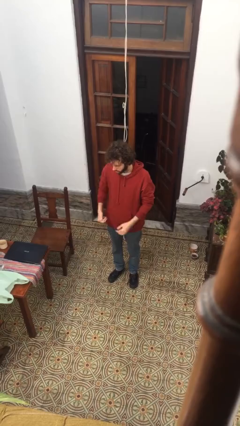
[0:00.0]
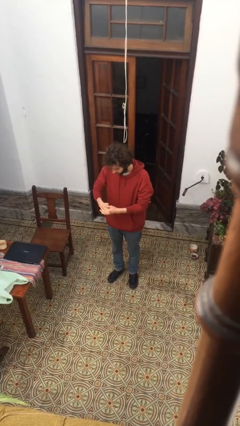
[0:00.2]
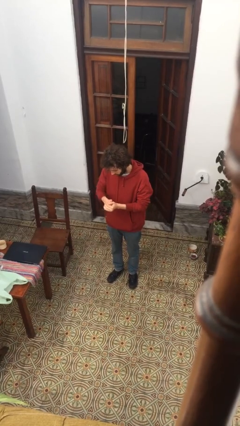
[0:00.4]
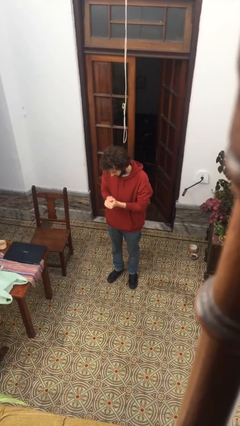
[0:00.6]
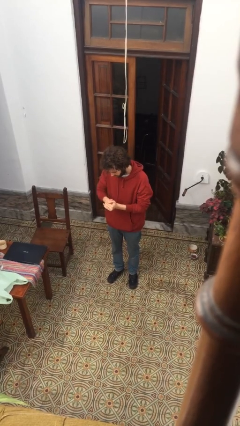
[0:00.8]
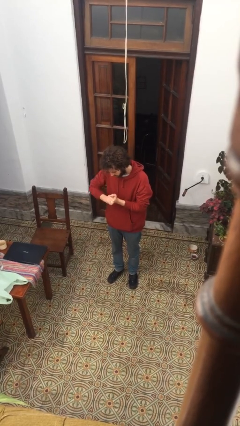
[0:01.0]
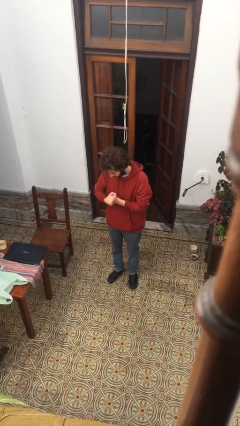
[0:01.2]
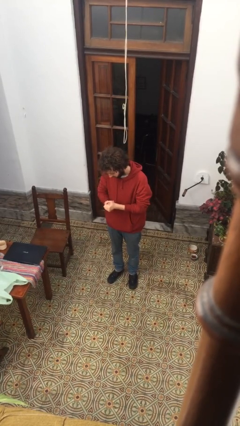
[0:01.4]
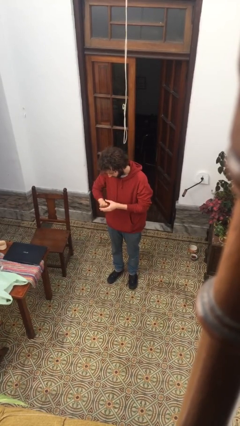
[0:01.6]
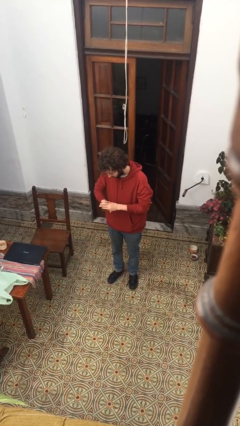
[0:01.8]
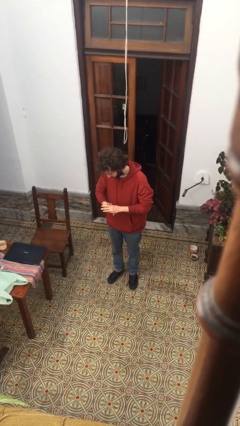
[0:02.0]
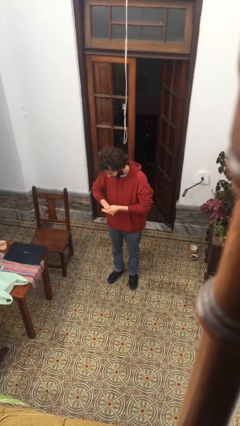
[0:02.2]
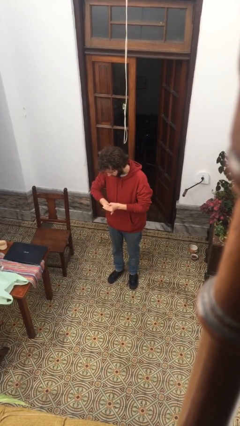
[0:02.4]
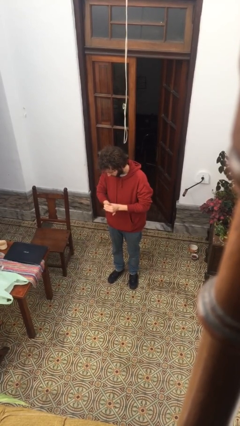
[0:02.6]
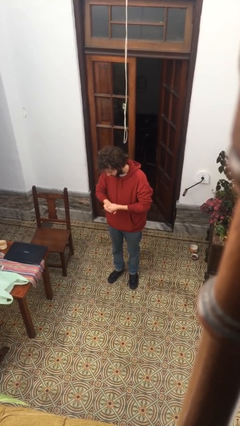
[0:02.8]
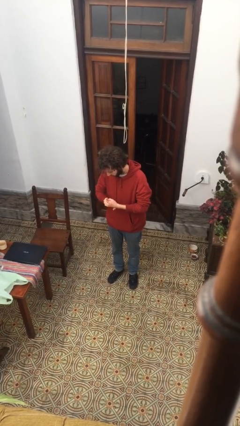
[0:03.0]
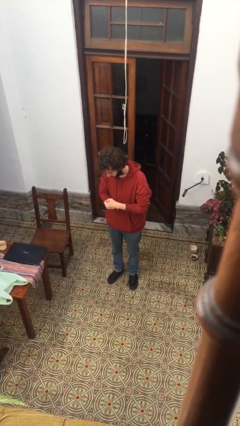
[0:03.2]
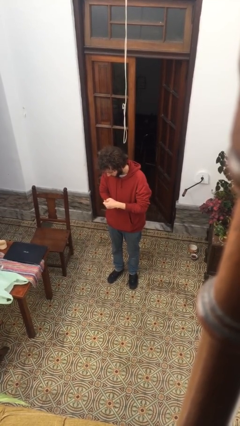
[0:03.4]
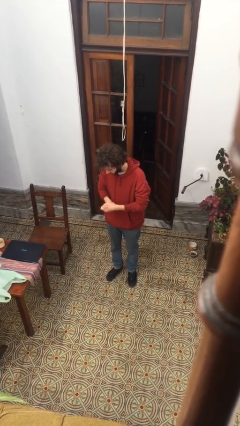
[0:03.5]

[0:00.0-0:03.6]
person cracks knuckles

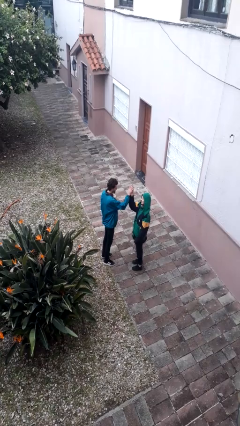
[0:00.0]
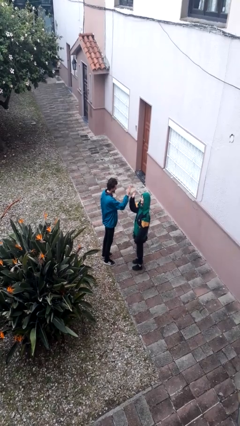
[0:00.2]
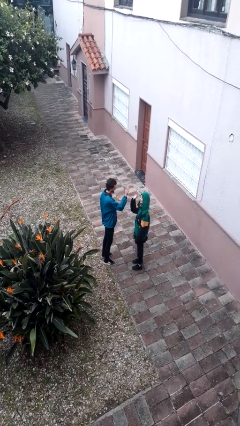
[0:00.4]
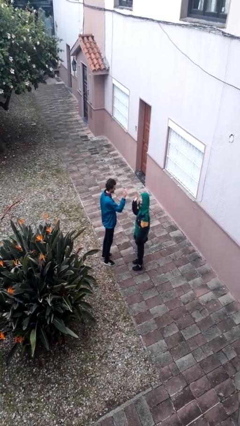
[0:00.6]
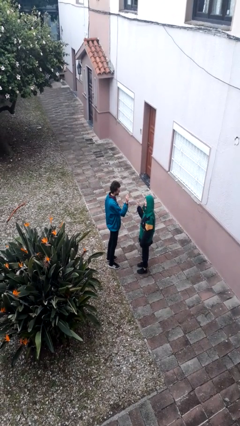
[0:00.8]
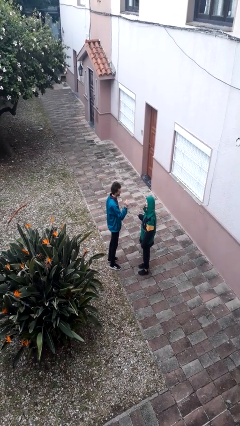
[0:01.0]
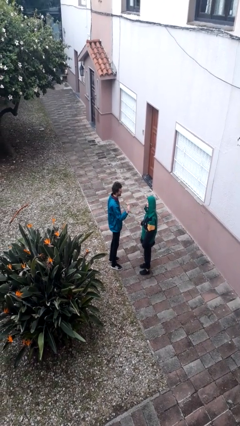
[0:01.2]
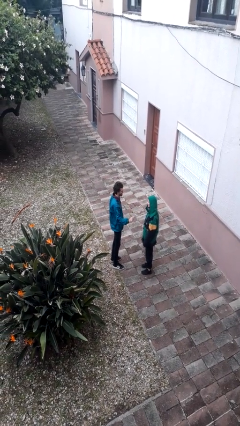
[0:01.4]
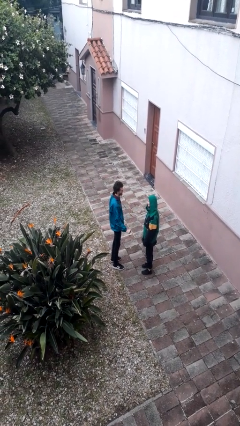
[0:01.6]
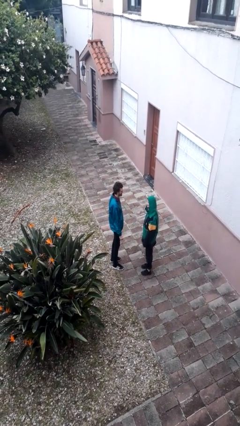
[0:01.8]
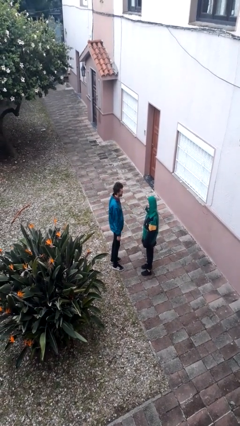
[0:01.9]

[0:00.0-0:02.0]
person highfives hand

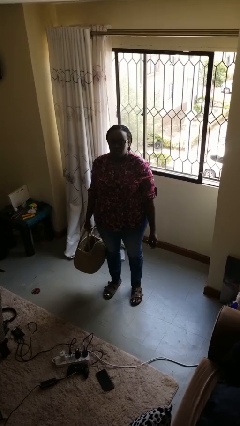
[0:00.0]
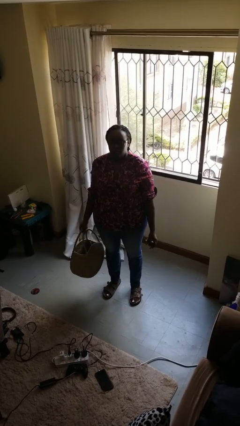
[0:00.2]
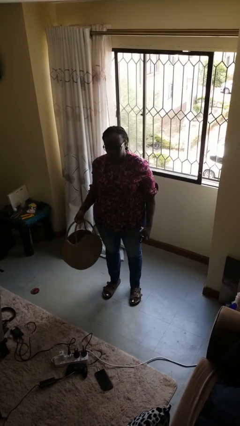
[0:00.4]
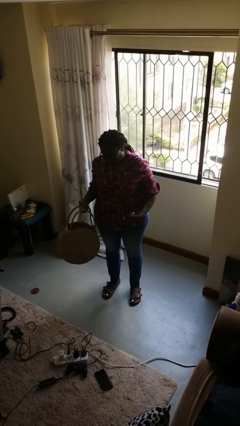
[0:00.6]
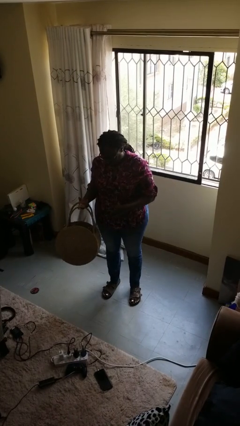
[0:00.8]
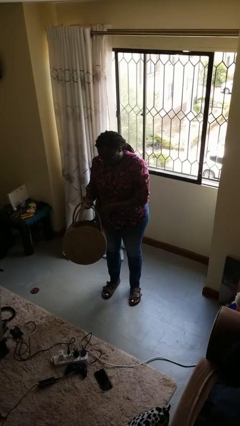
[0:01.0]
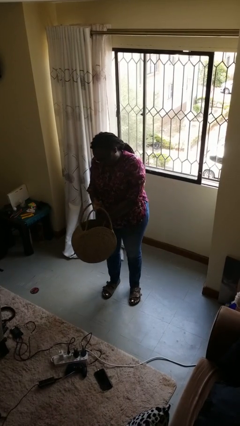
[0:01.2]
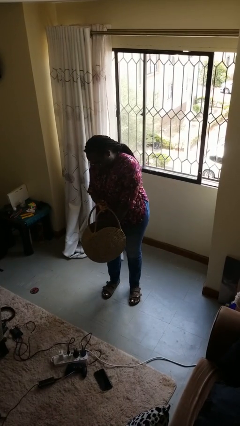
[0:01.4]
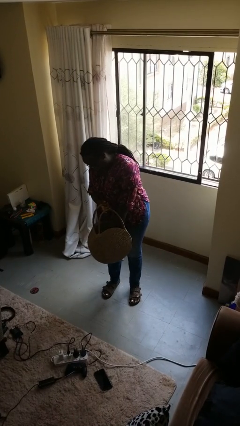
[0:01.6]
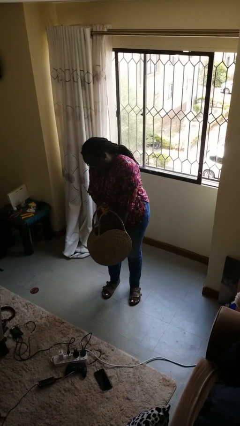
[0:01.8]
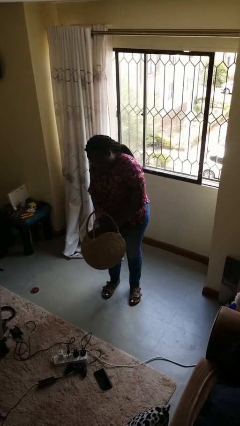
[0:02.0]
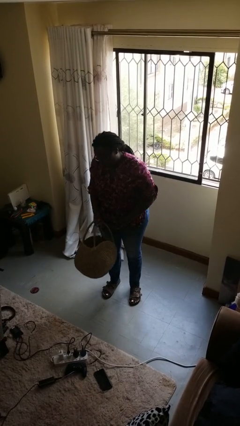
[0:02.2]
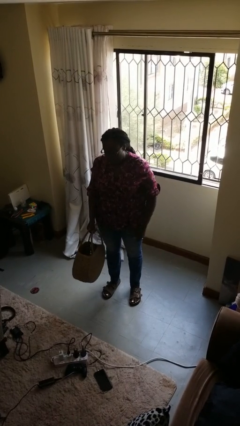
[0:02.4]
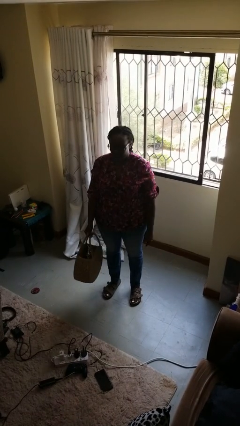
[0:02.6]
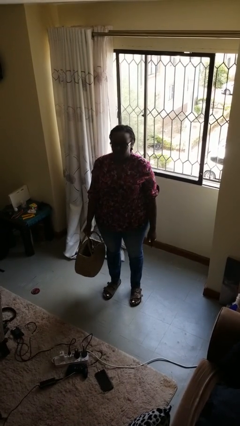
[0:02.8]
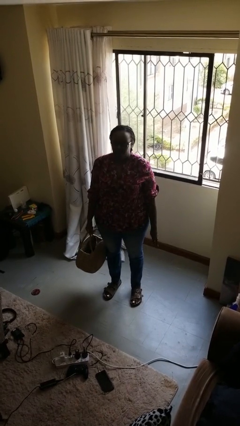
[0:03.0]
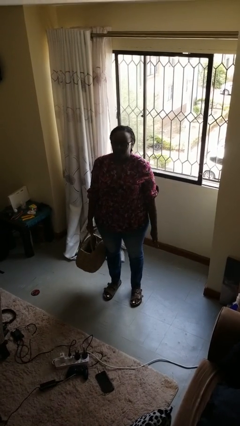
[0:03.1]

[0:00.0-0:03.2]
person puts object into basket

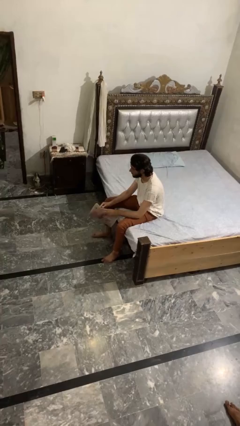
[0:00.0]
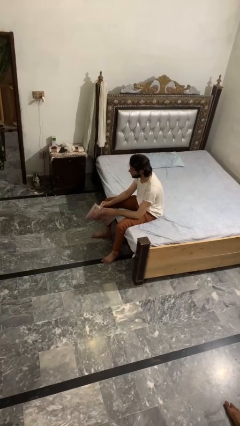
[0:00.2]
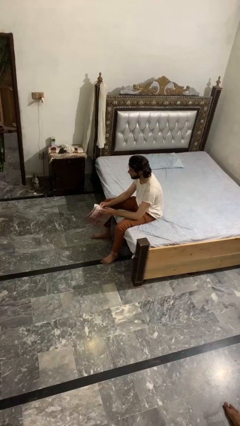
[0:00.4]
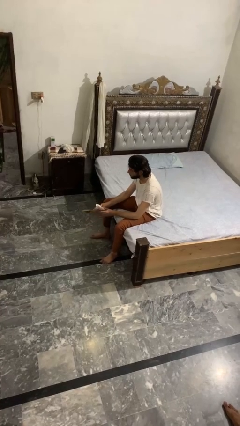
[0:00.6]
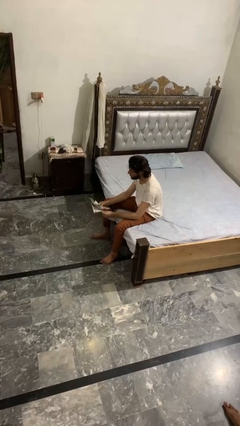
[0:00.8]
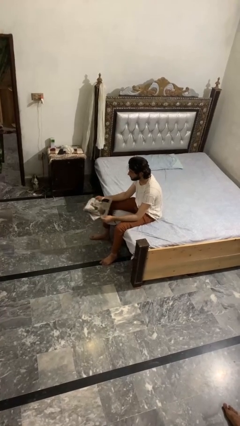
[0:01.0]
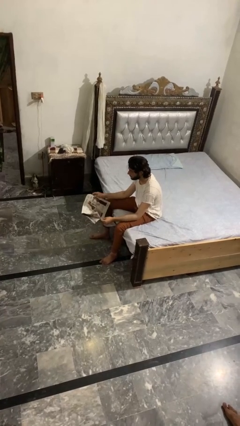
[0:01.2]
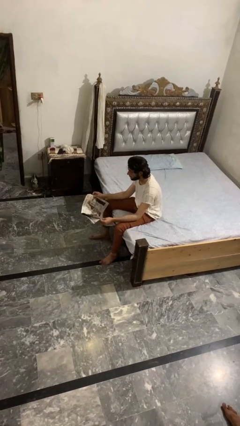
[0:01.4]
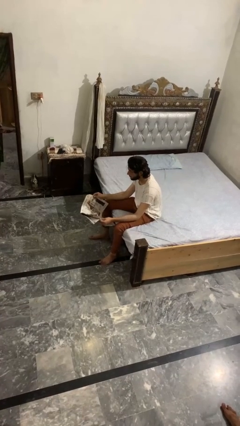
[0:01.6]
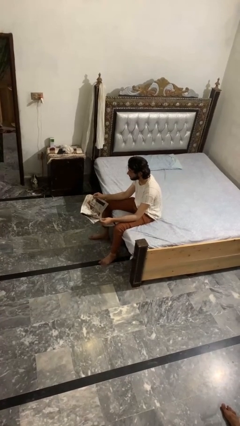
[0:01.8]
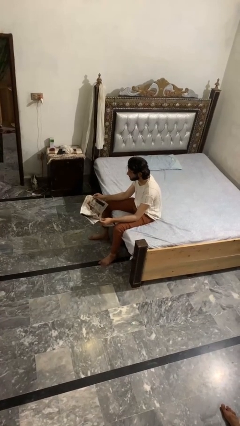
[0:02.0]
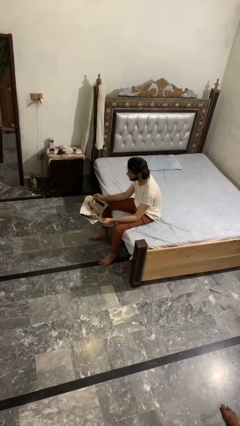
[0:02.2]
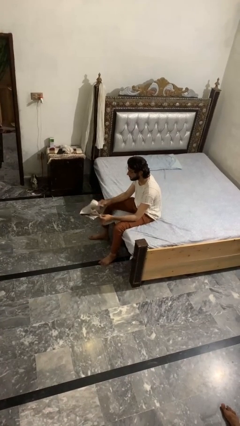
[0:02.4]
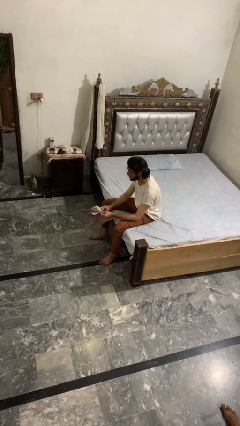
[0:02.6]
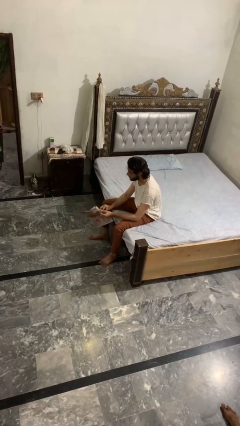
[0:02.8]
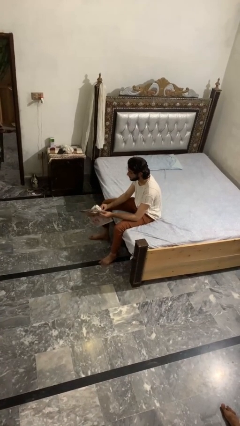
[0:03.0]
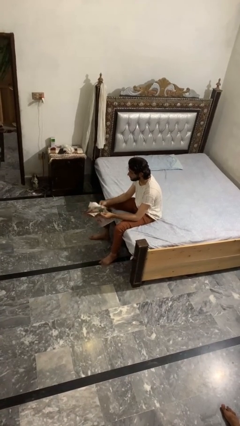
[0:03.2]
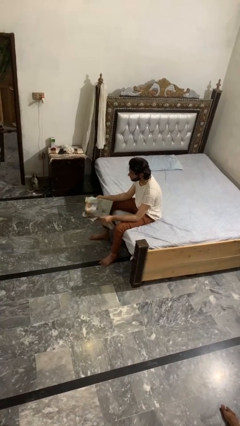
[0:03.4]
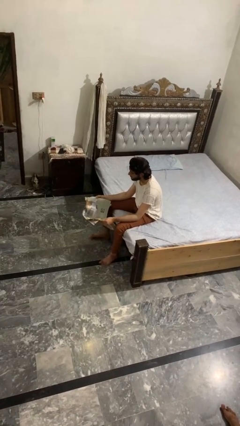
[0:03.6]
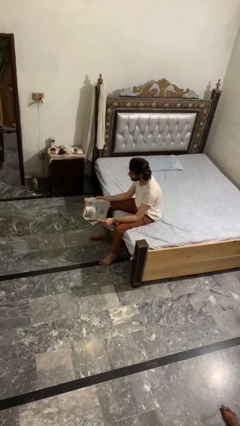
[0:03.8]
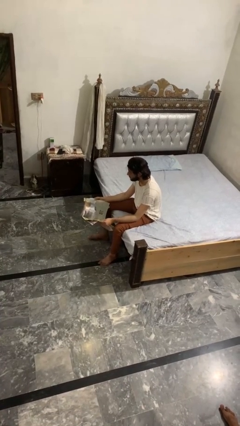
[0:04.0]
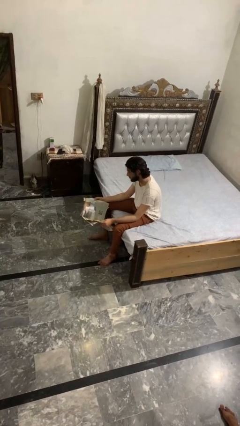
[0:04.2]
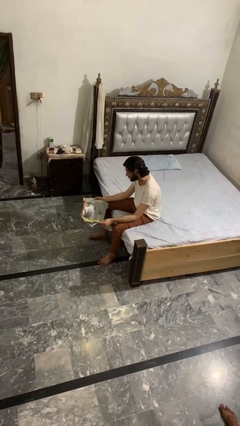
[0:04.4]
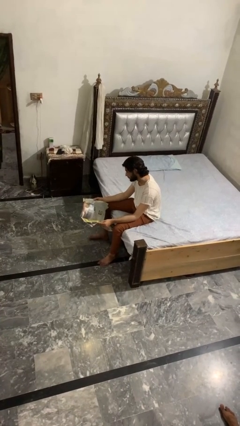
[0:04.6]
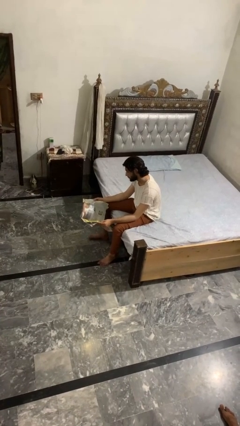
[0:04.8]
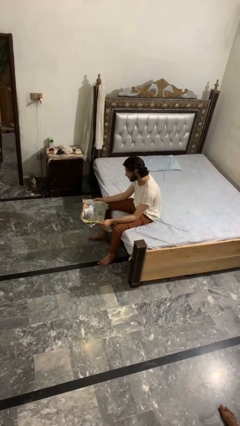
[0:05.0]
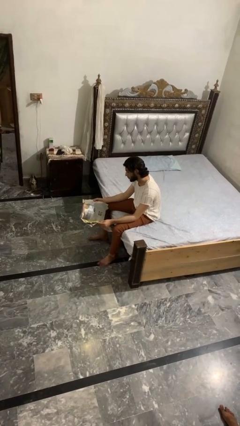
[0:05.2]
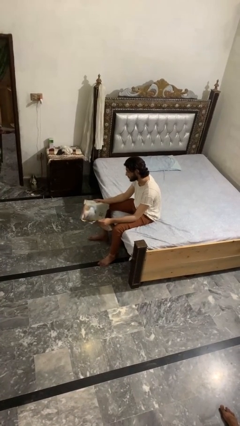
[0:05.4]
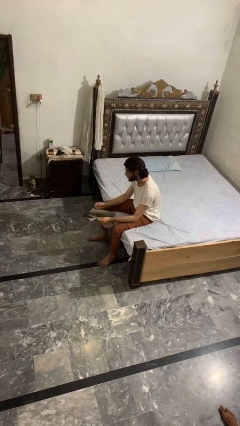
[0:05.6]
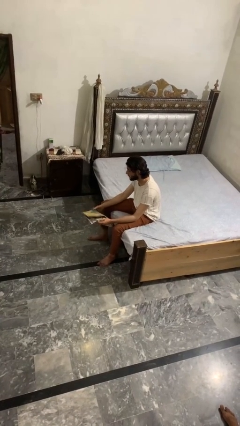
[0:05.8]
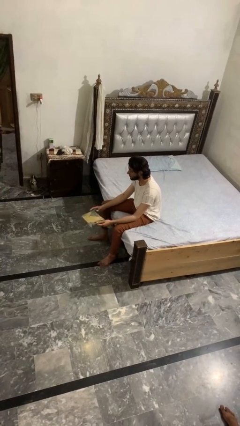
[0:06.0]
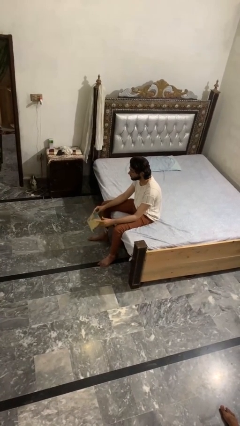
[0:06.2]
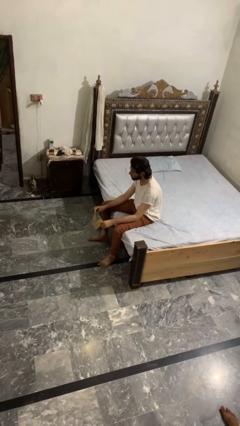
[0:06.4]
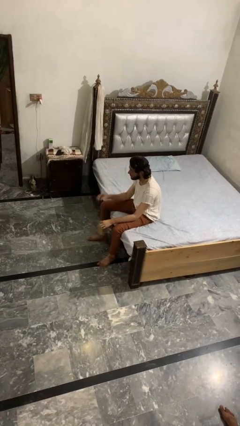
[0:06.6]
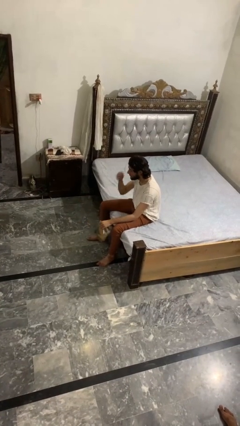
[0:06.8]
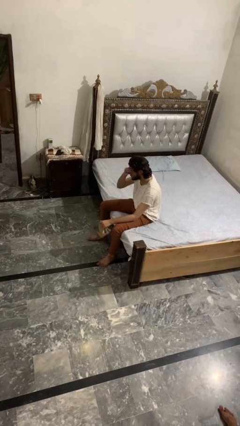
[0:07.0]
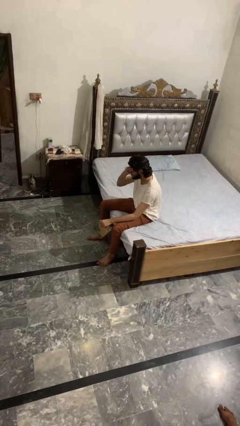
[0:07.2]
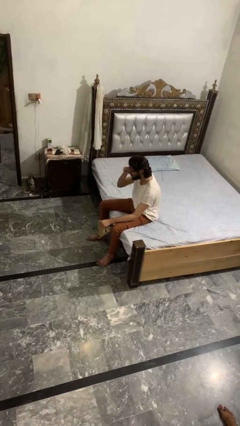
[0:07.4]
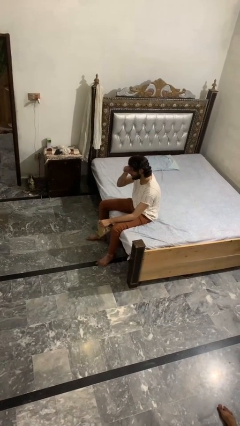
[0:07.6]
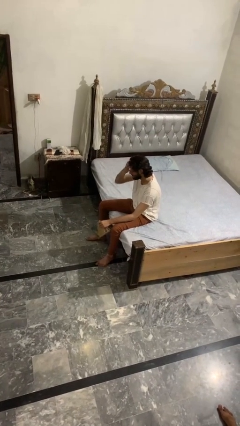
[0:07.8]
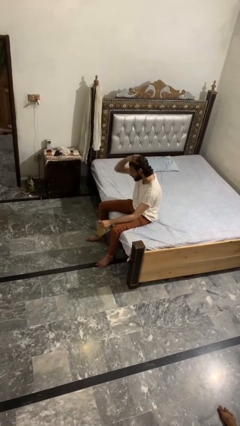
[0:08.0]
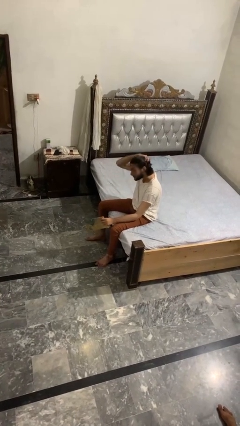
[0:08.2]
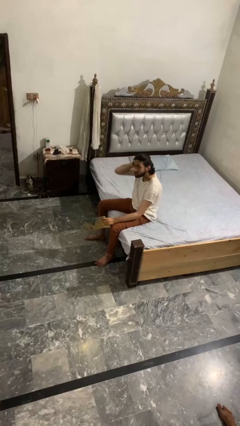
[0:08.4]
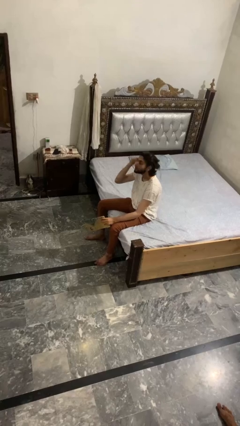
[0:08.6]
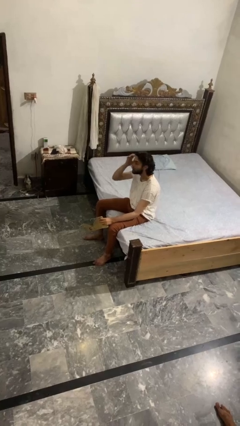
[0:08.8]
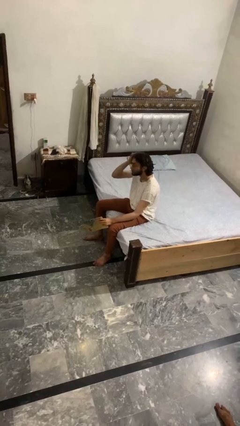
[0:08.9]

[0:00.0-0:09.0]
person reads magazine

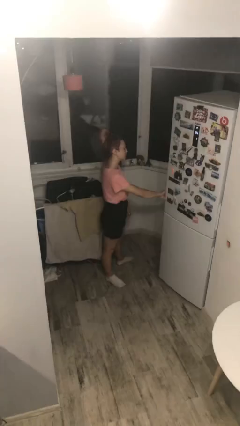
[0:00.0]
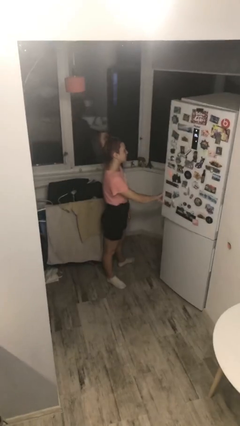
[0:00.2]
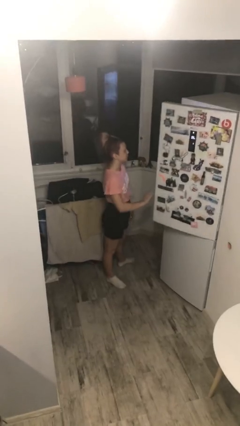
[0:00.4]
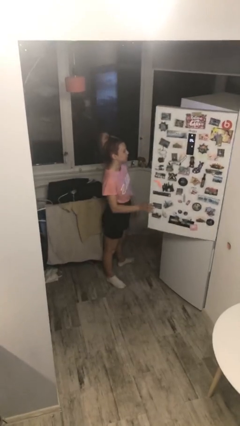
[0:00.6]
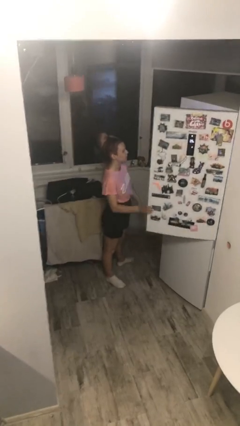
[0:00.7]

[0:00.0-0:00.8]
person opens refrigerator
